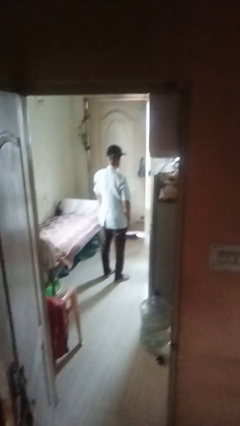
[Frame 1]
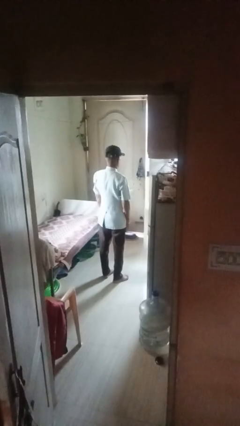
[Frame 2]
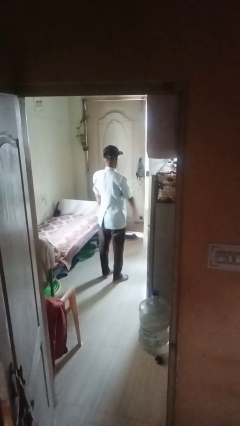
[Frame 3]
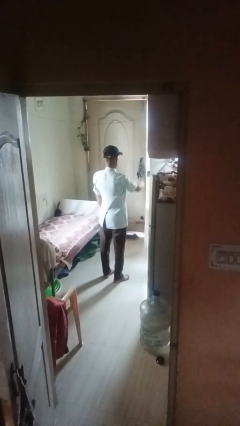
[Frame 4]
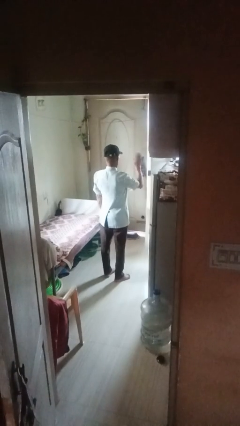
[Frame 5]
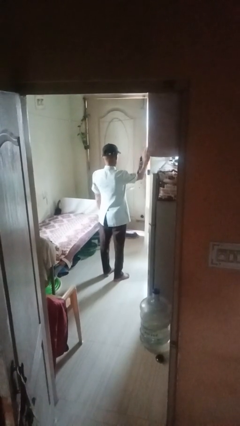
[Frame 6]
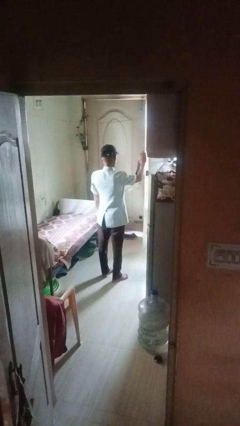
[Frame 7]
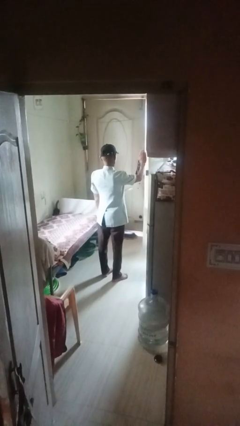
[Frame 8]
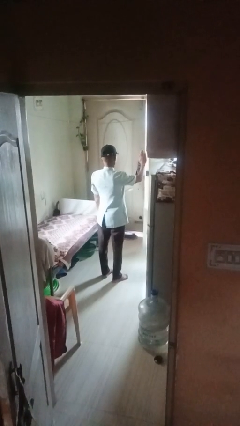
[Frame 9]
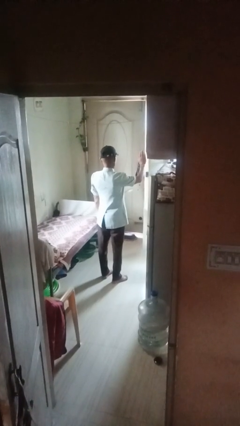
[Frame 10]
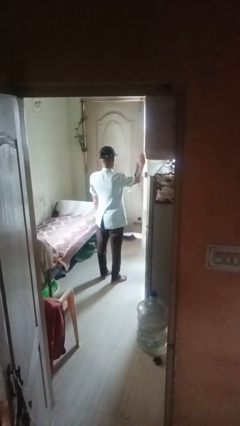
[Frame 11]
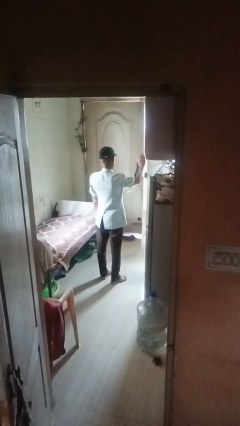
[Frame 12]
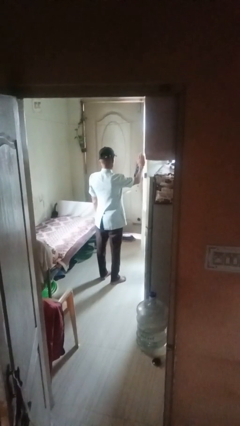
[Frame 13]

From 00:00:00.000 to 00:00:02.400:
person gestures stop

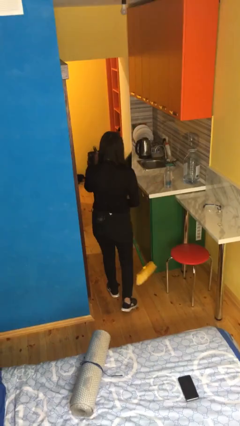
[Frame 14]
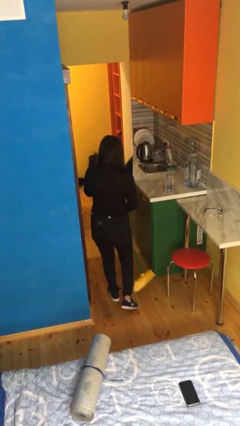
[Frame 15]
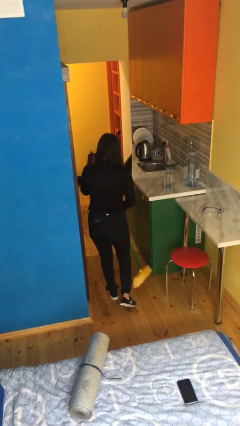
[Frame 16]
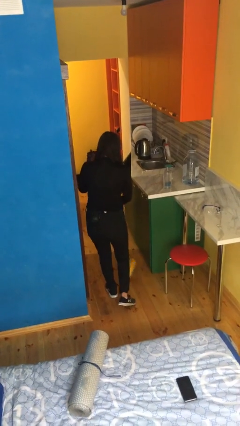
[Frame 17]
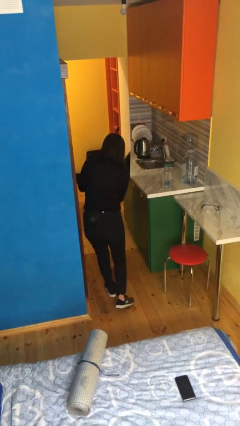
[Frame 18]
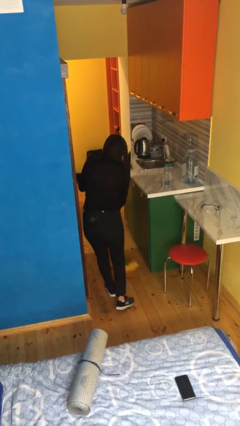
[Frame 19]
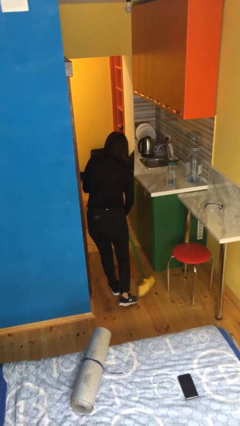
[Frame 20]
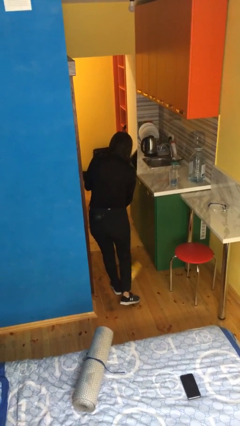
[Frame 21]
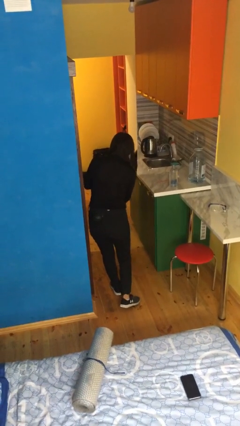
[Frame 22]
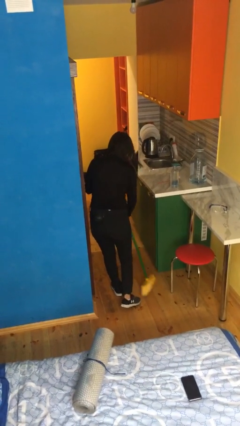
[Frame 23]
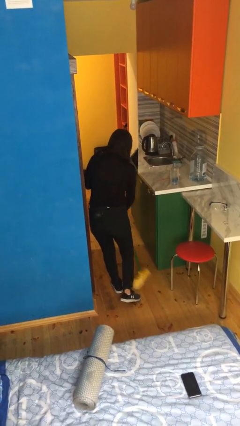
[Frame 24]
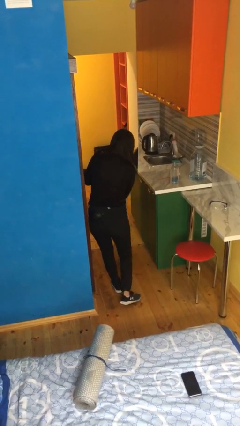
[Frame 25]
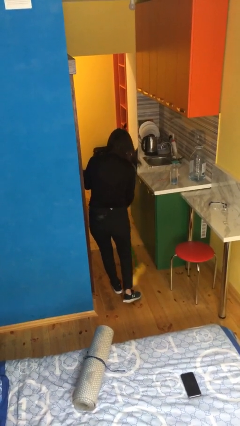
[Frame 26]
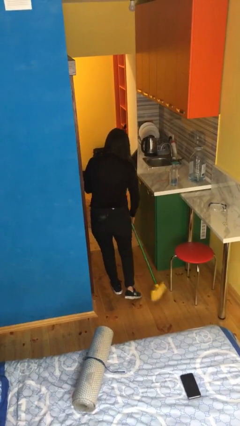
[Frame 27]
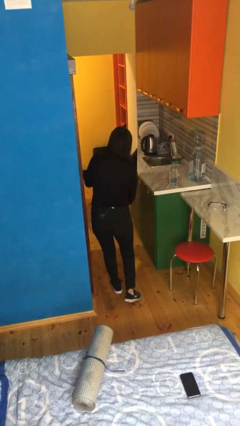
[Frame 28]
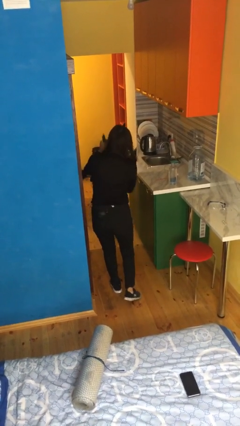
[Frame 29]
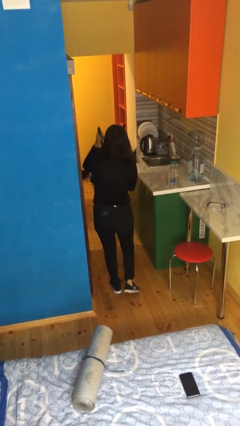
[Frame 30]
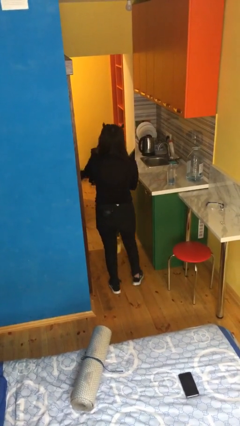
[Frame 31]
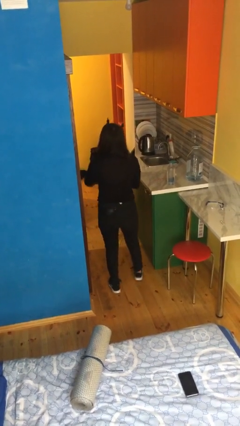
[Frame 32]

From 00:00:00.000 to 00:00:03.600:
person sweeps floor

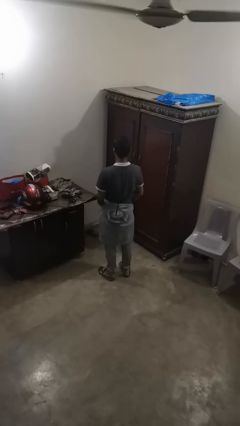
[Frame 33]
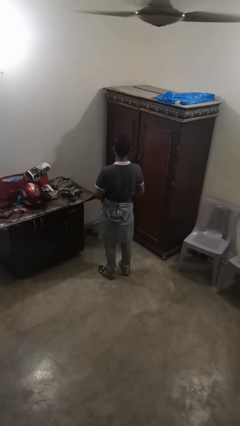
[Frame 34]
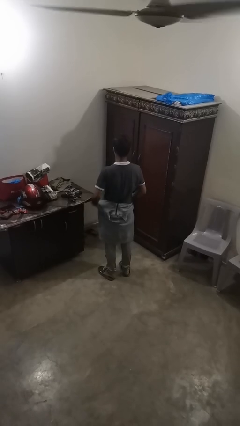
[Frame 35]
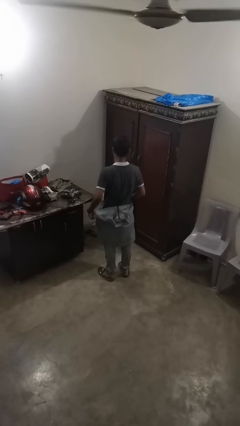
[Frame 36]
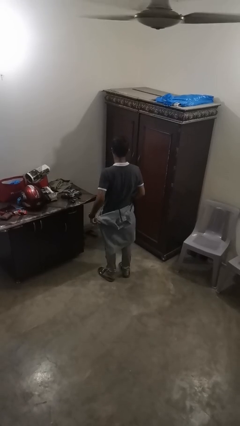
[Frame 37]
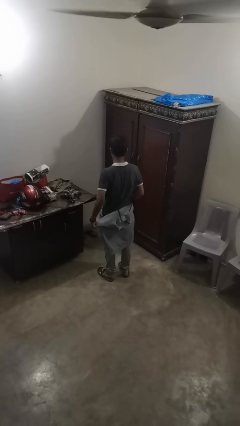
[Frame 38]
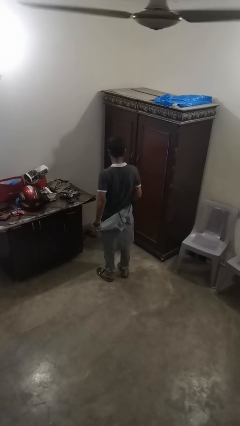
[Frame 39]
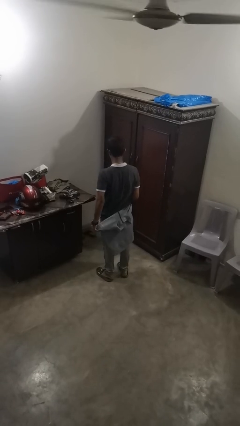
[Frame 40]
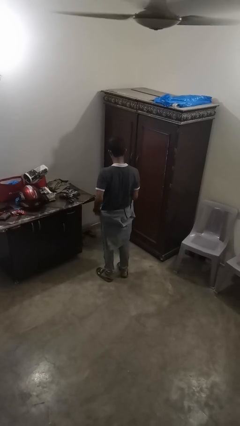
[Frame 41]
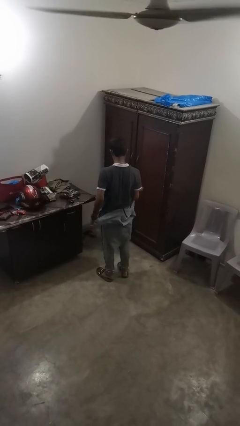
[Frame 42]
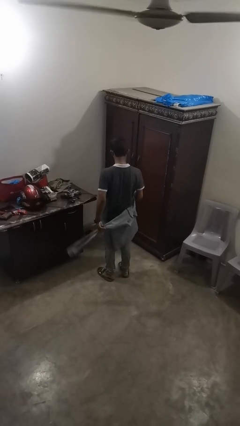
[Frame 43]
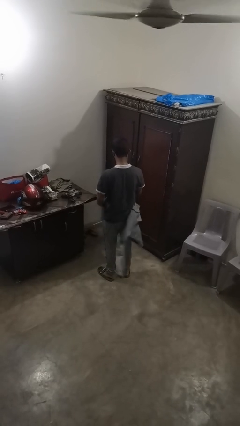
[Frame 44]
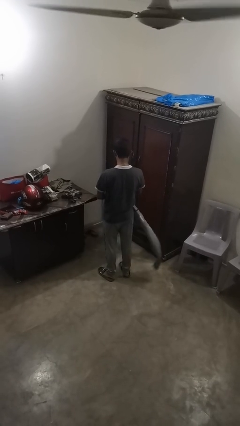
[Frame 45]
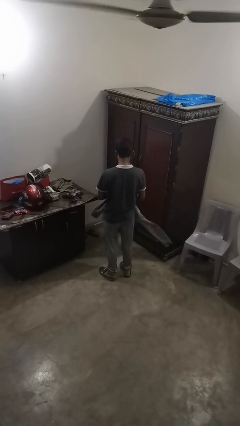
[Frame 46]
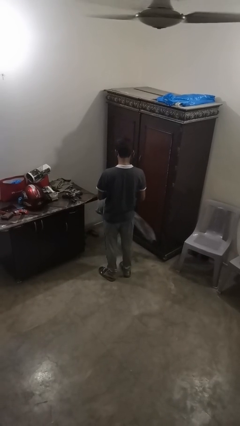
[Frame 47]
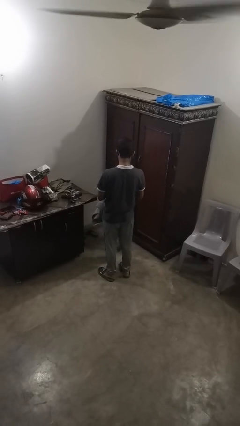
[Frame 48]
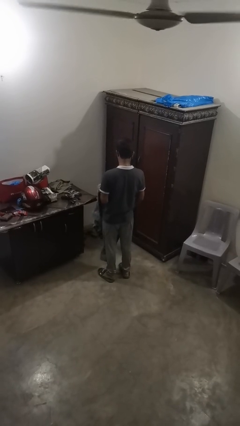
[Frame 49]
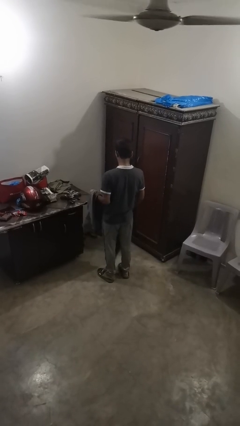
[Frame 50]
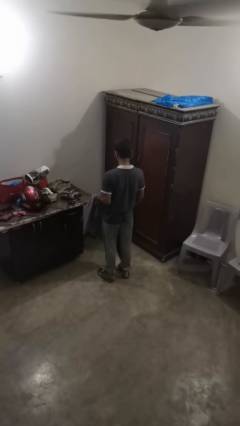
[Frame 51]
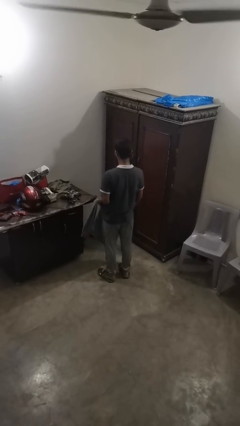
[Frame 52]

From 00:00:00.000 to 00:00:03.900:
person unties jacket around waist

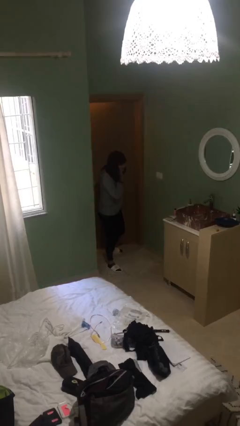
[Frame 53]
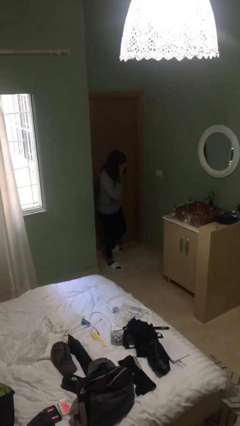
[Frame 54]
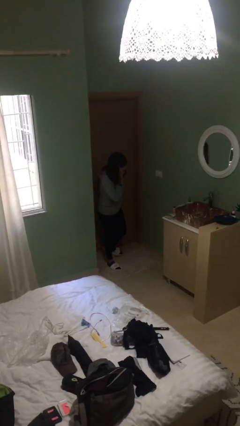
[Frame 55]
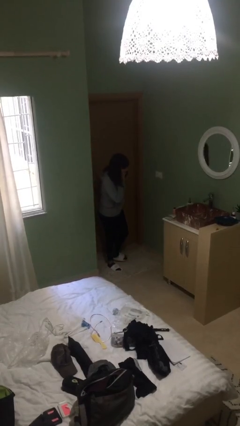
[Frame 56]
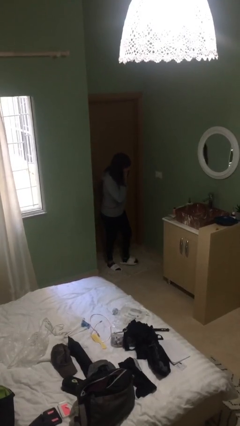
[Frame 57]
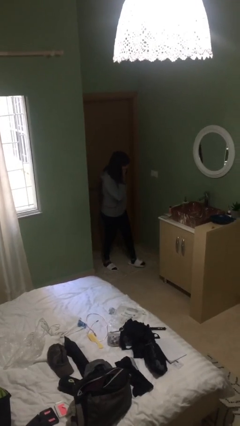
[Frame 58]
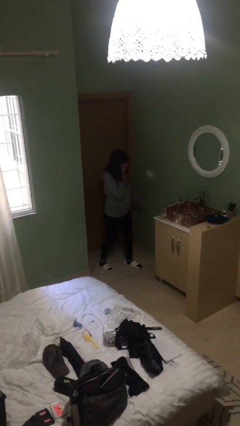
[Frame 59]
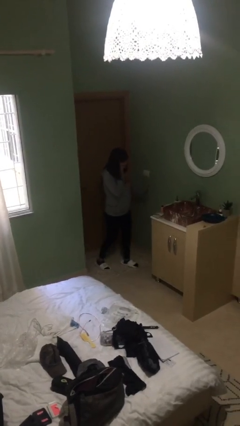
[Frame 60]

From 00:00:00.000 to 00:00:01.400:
person closes facility door

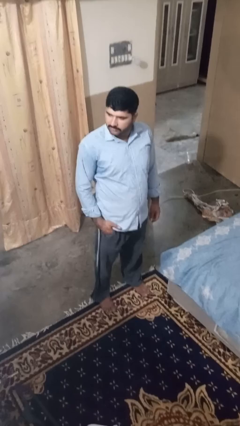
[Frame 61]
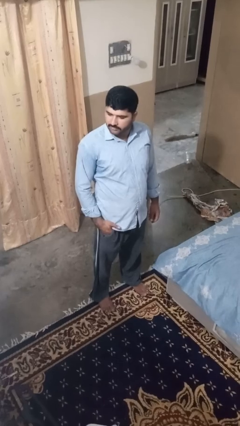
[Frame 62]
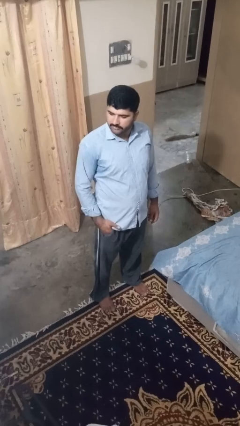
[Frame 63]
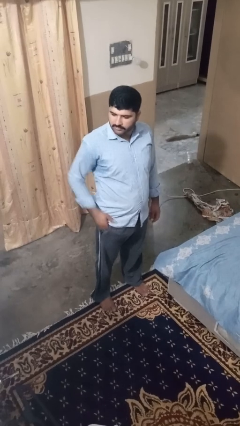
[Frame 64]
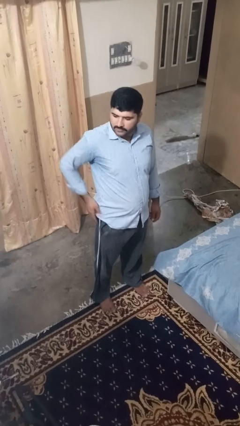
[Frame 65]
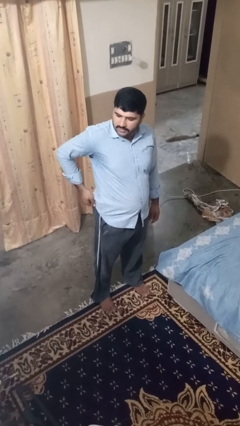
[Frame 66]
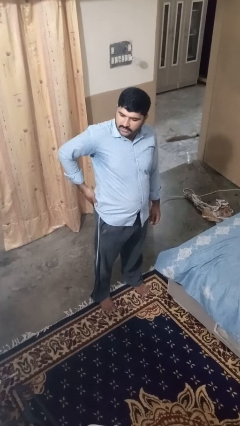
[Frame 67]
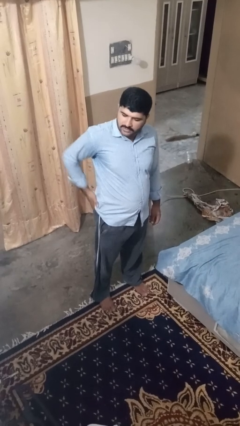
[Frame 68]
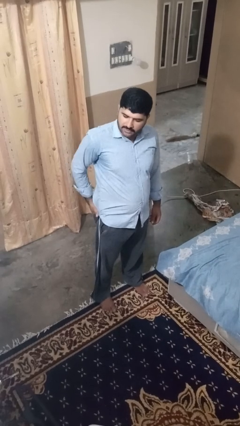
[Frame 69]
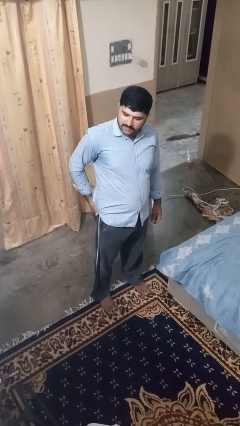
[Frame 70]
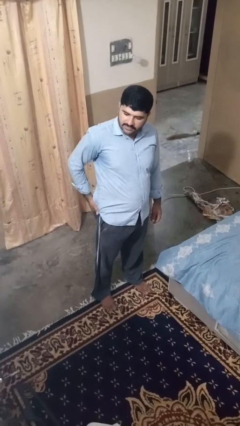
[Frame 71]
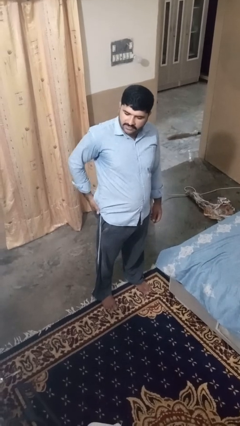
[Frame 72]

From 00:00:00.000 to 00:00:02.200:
person puts hands in back pockets

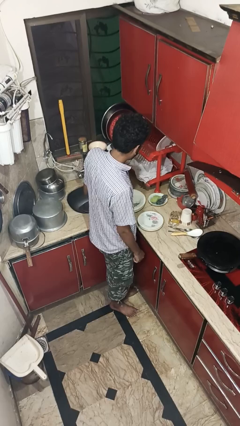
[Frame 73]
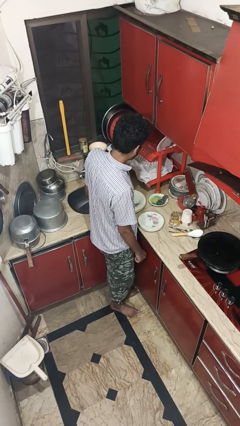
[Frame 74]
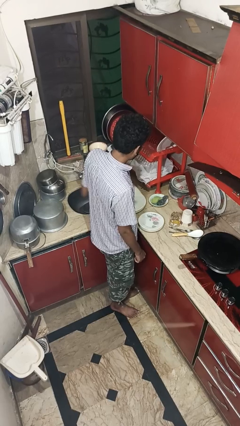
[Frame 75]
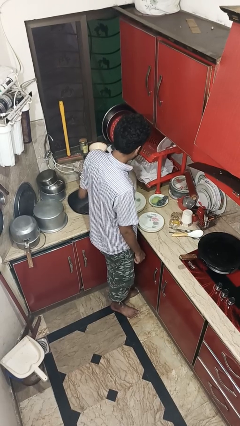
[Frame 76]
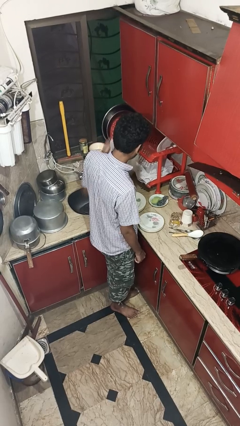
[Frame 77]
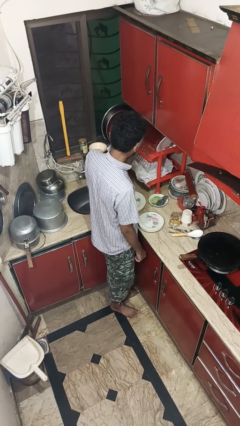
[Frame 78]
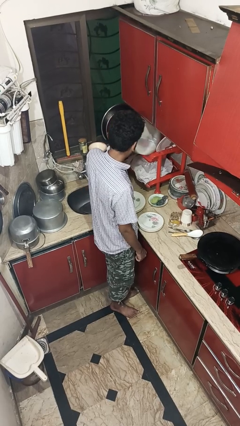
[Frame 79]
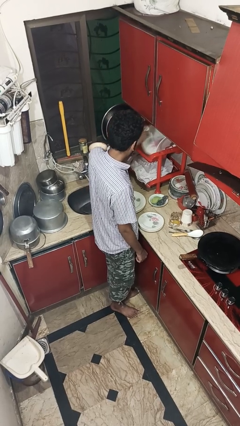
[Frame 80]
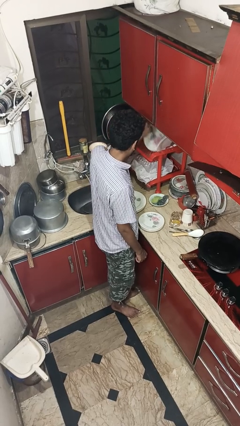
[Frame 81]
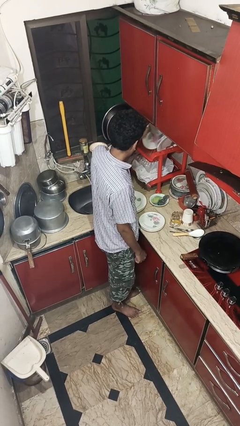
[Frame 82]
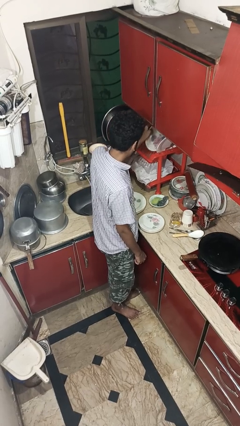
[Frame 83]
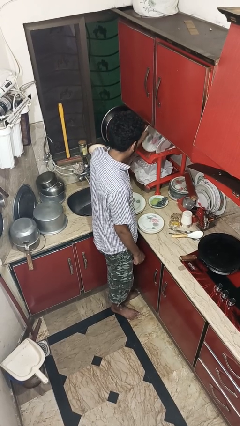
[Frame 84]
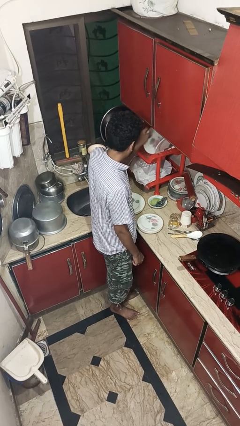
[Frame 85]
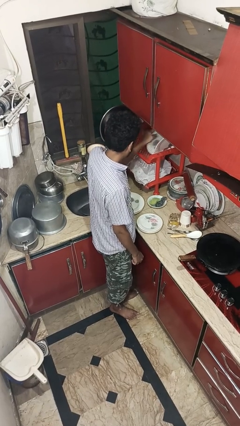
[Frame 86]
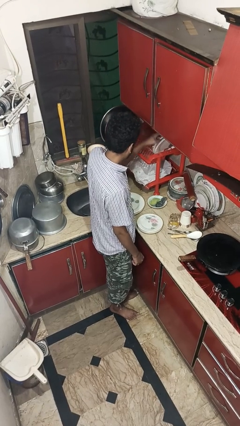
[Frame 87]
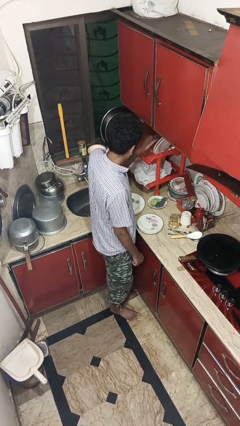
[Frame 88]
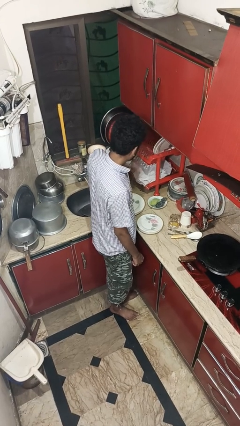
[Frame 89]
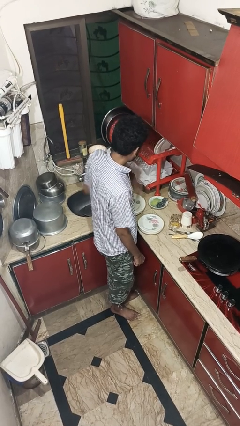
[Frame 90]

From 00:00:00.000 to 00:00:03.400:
person loads dishwasher

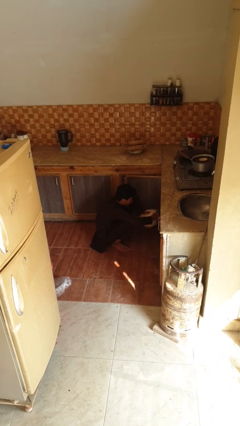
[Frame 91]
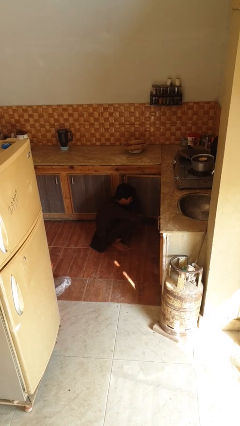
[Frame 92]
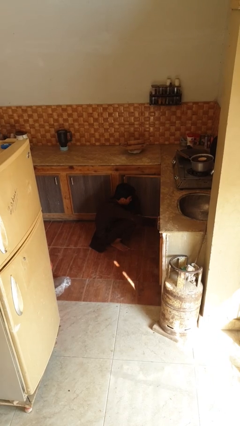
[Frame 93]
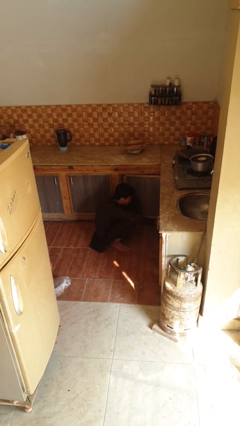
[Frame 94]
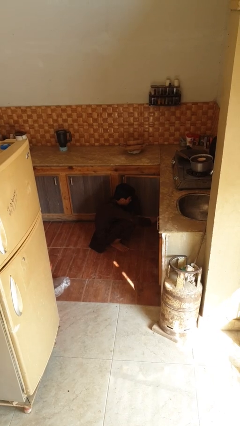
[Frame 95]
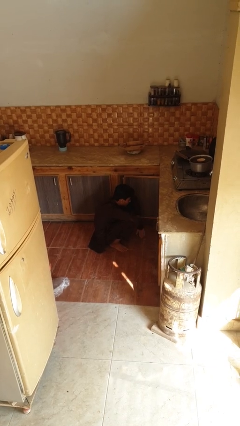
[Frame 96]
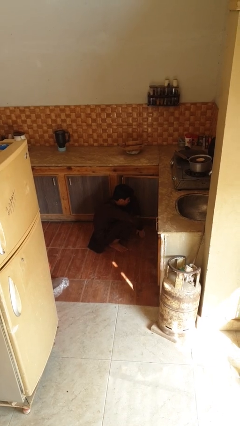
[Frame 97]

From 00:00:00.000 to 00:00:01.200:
person puts object into kitchen drawer
